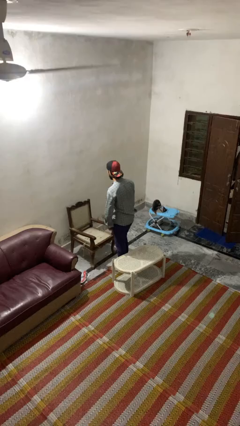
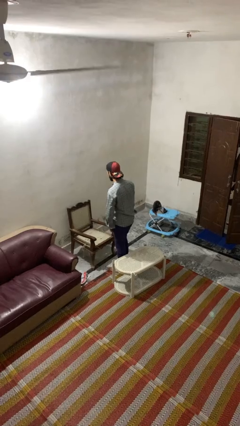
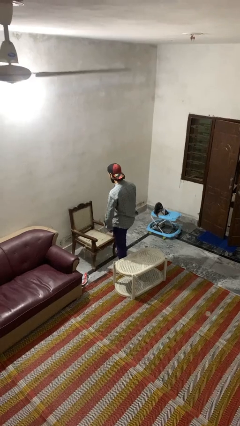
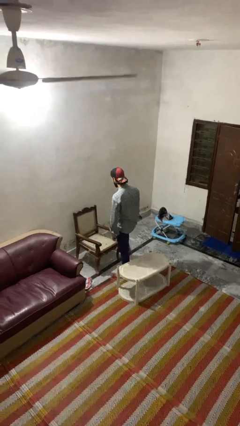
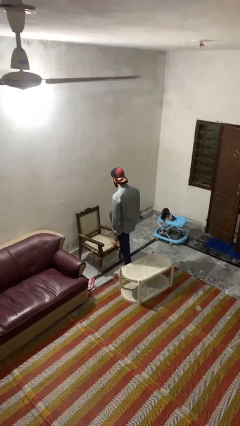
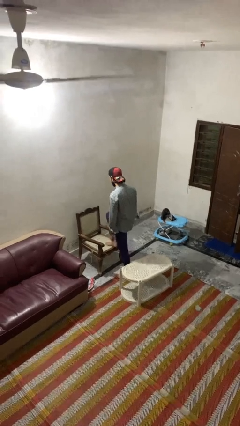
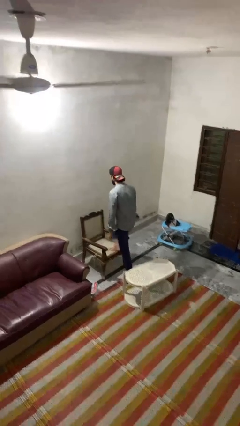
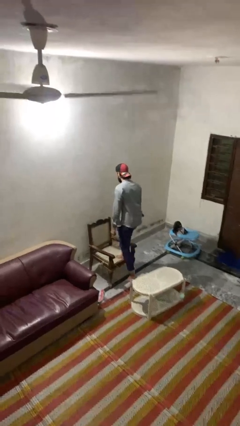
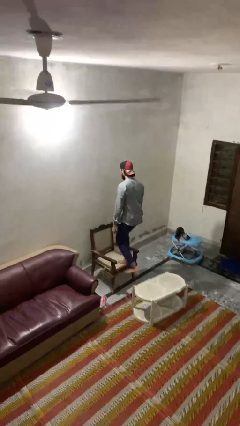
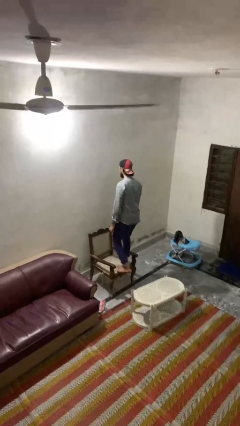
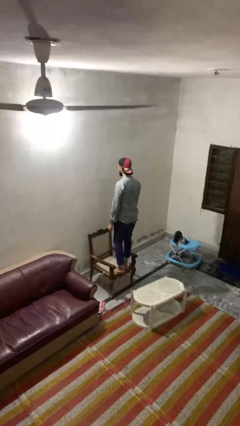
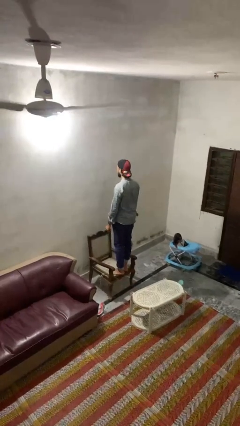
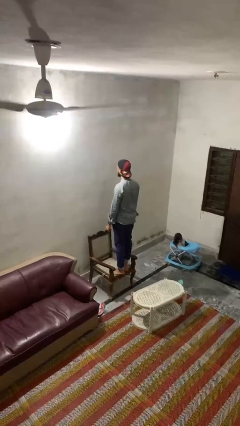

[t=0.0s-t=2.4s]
person climbs on chair

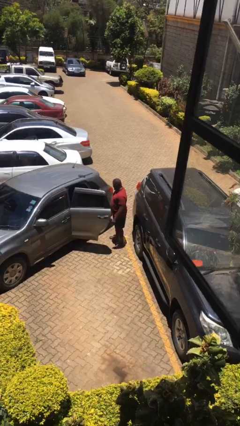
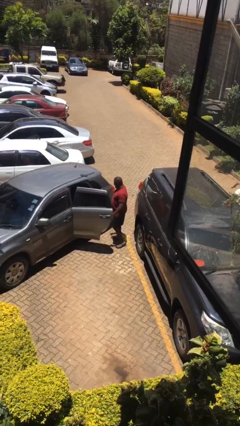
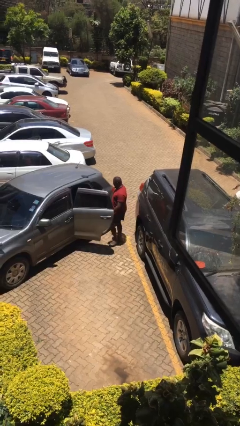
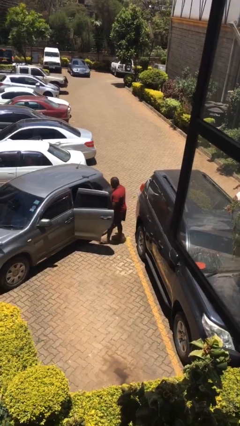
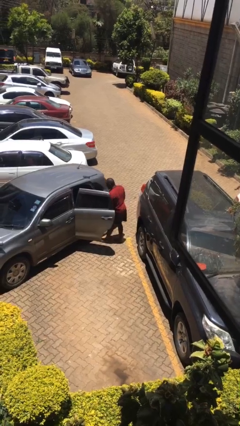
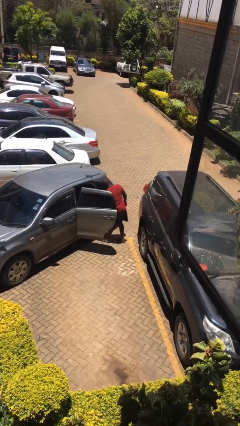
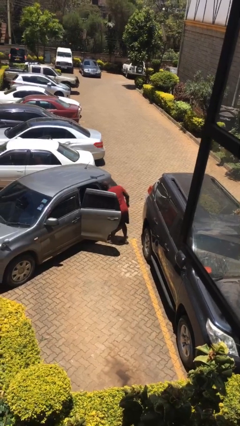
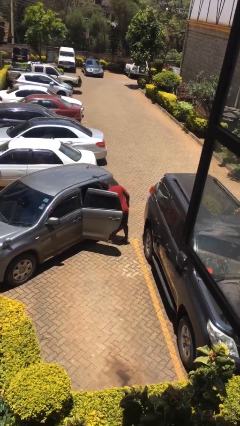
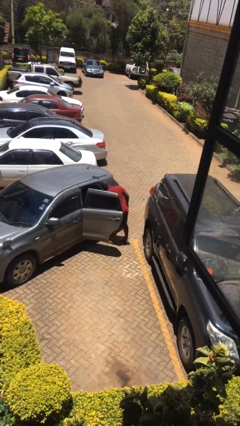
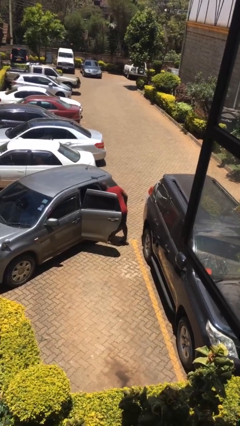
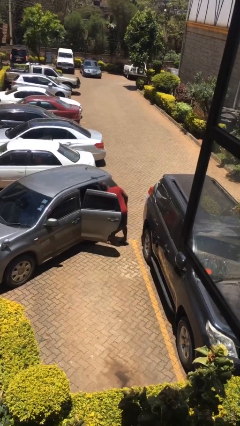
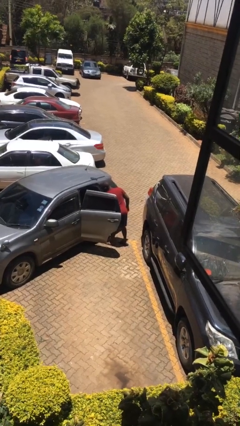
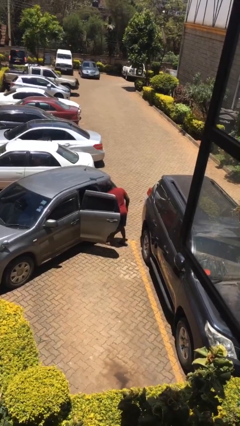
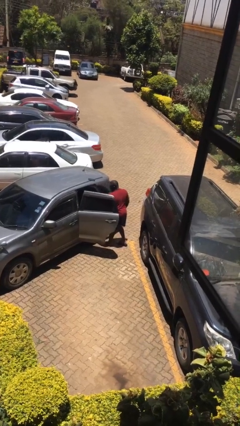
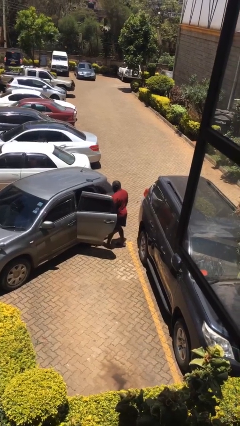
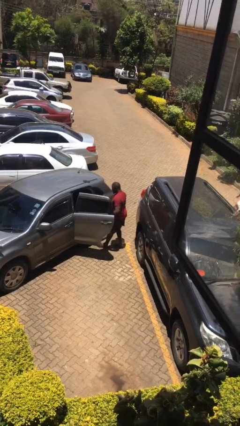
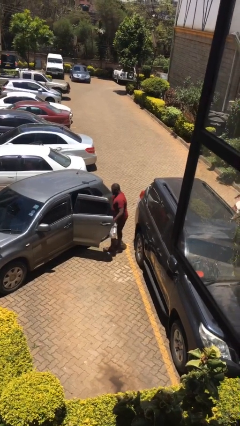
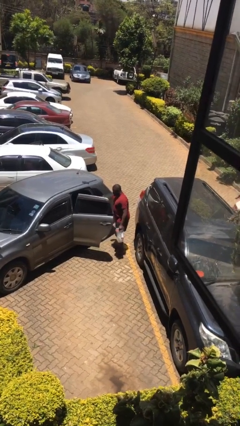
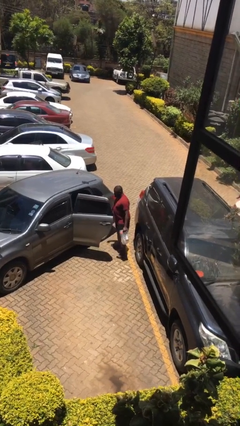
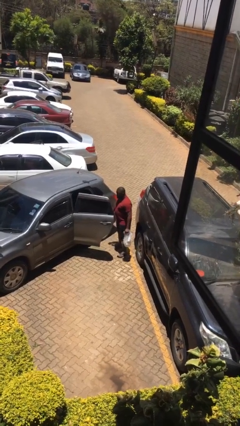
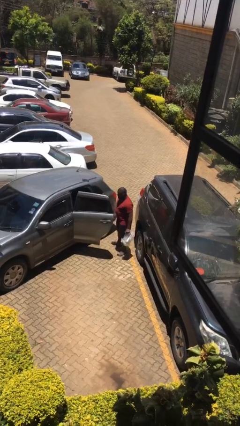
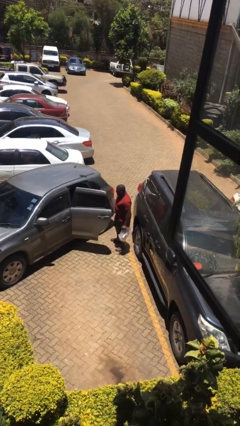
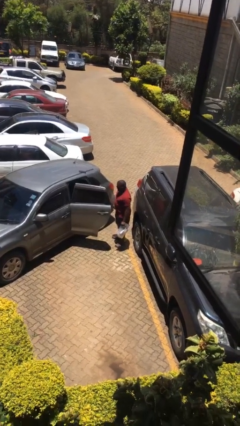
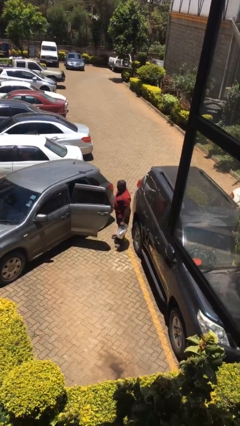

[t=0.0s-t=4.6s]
person unloads car

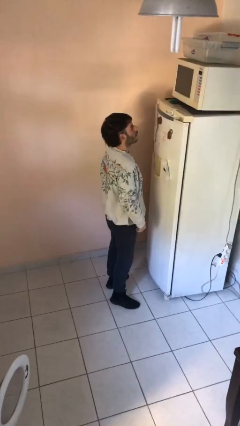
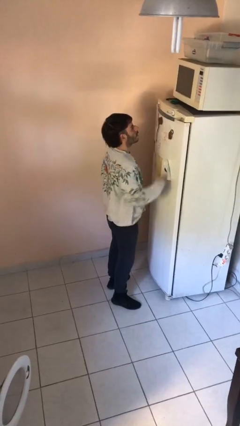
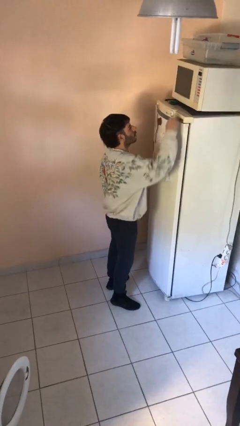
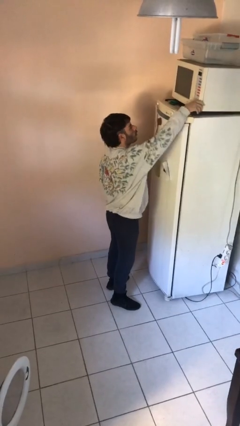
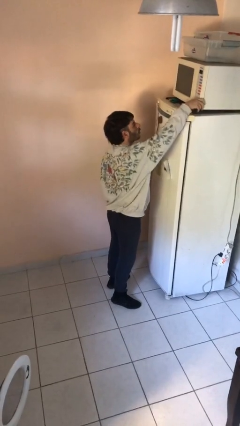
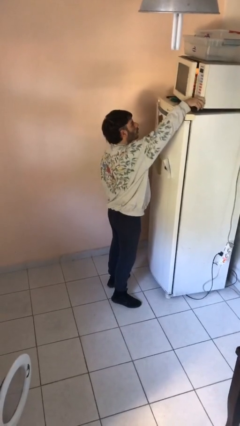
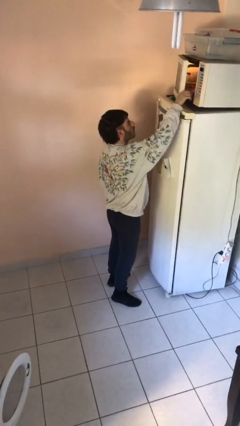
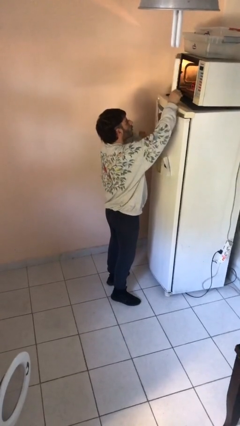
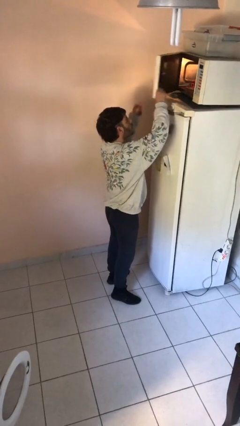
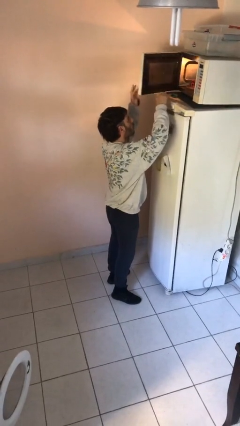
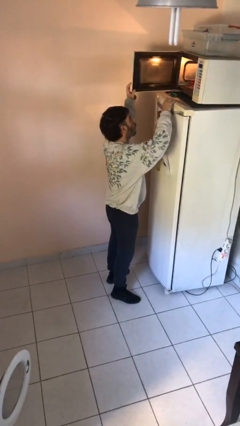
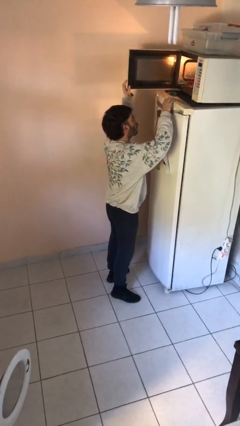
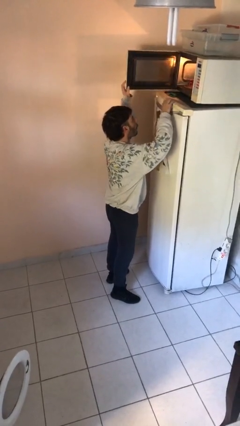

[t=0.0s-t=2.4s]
person opens microwave

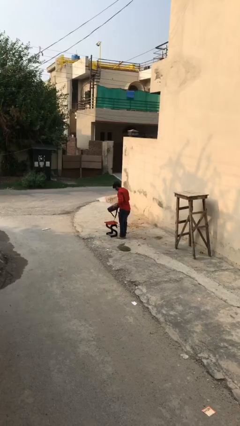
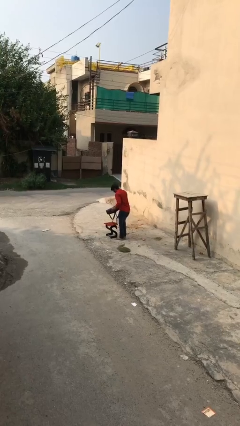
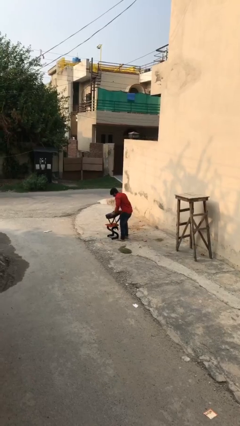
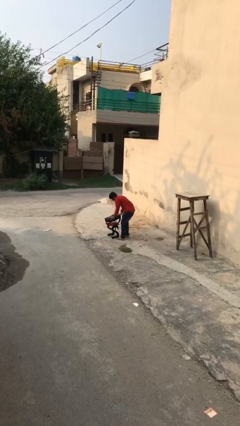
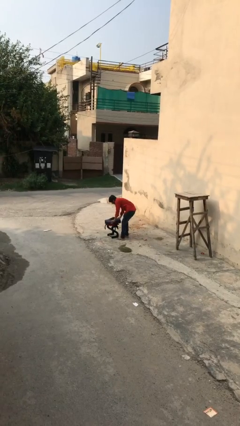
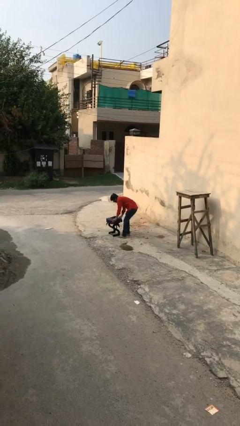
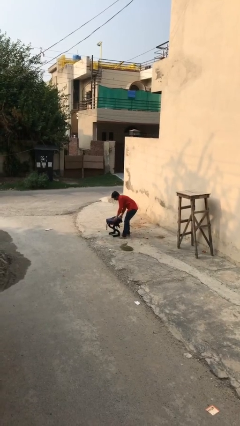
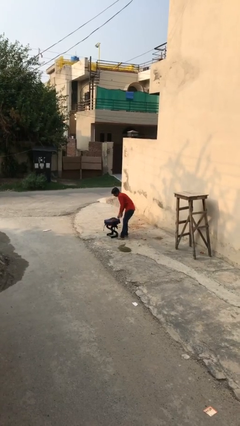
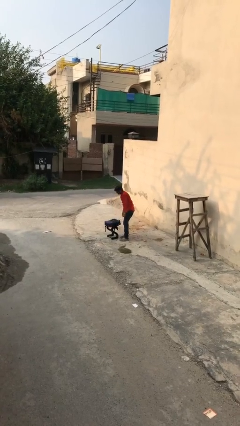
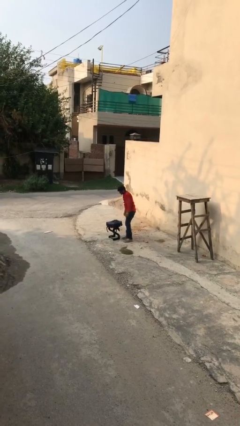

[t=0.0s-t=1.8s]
person puts down object on table

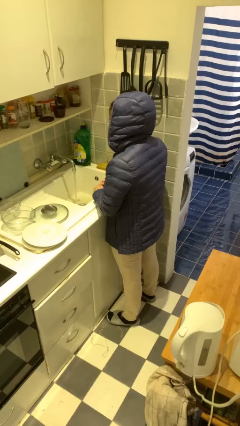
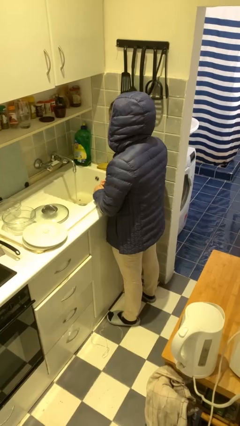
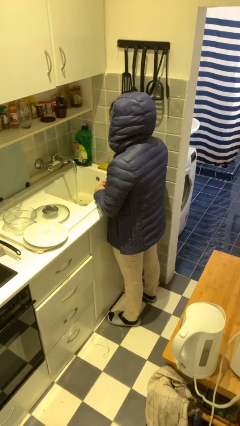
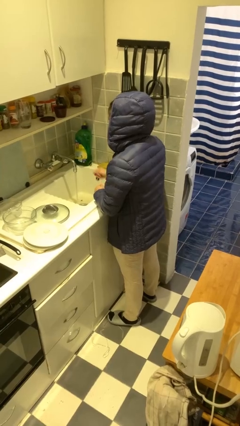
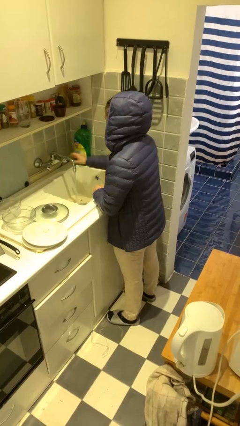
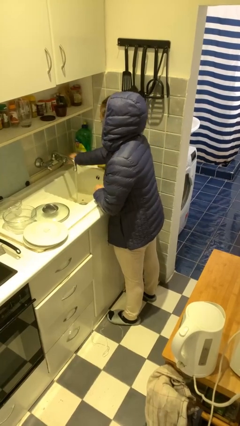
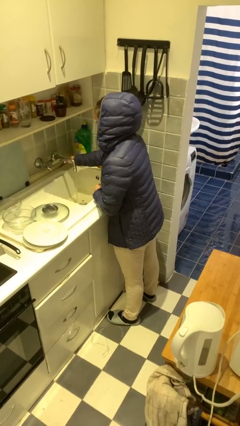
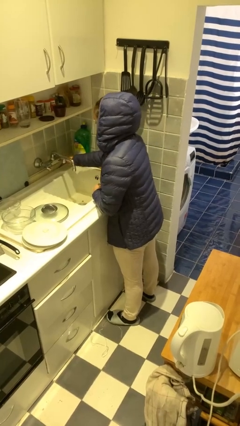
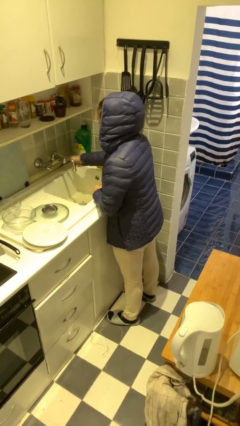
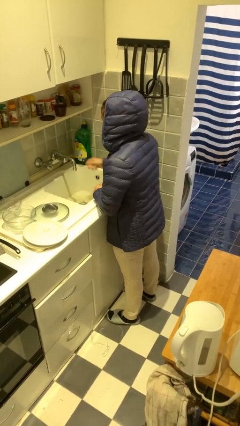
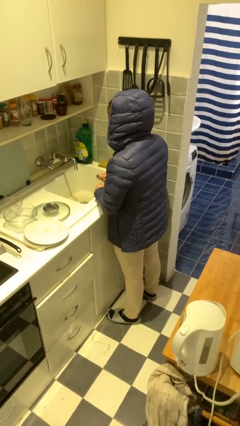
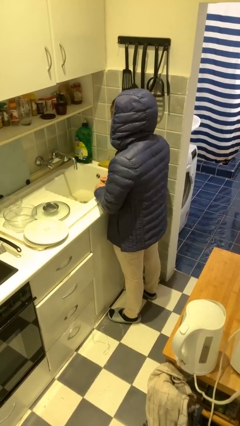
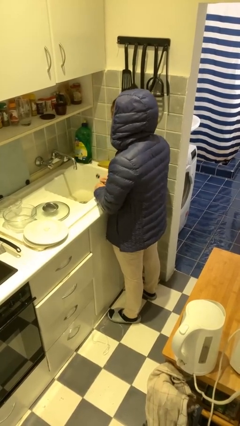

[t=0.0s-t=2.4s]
person turns off faucet

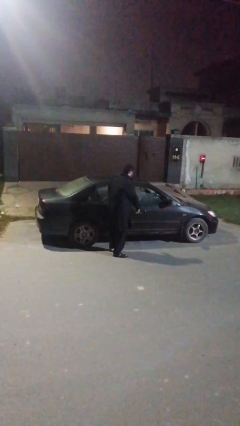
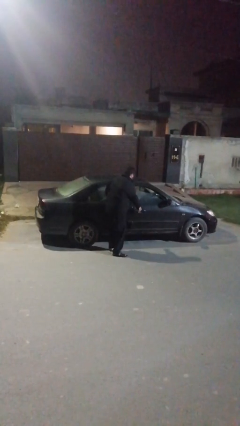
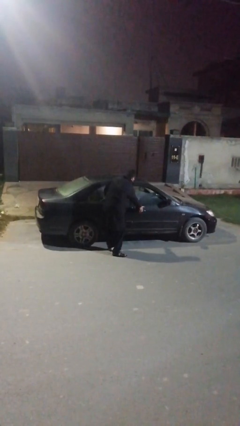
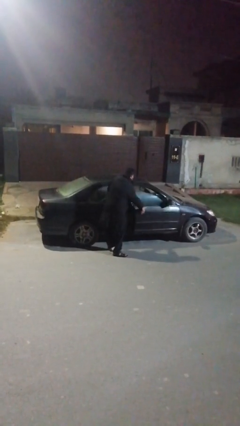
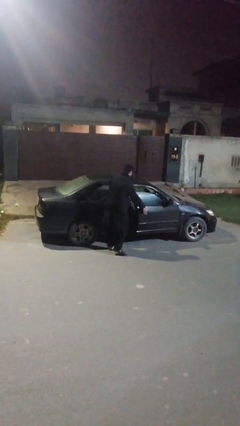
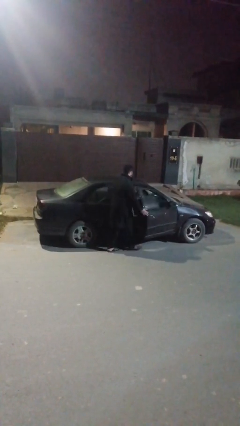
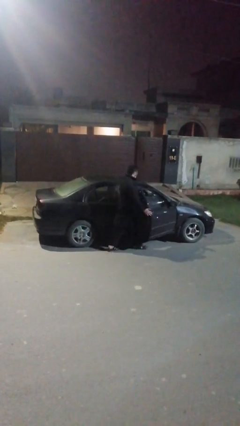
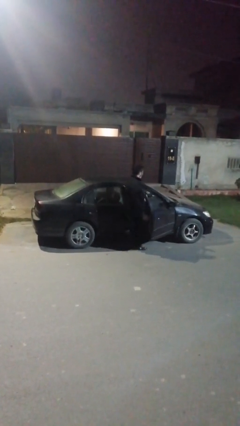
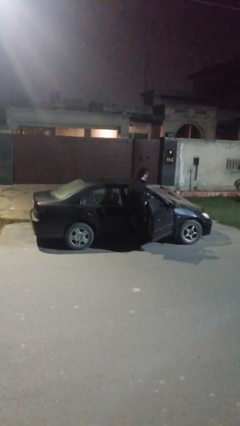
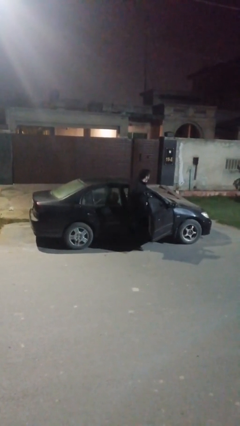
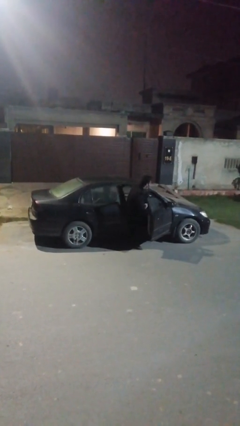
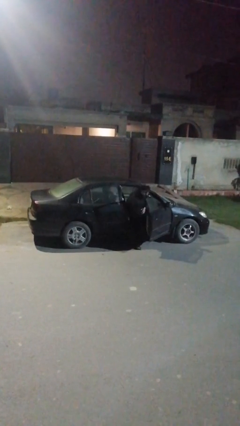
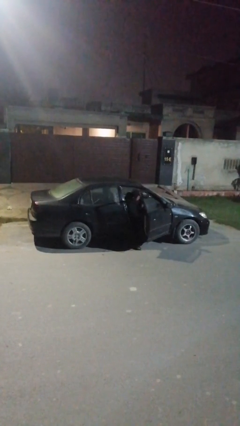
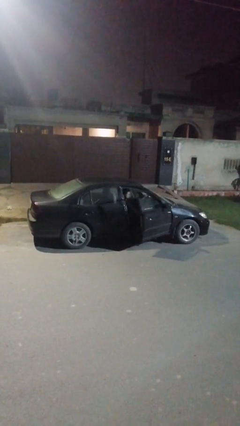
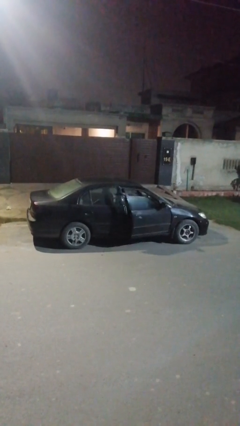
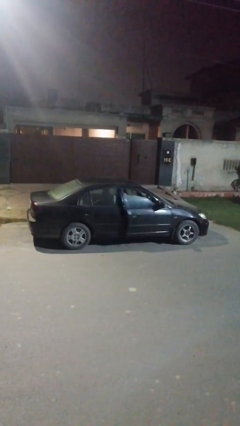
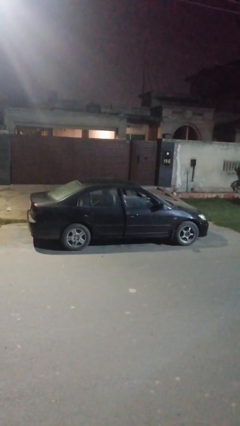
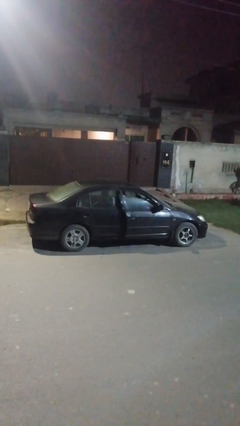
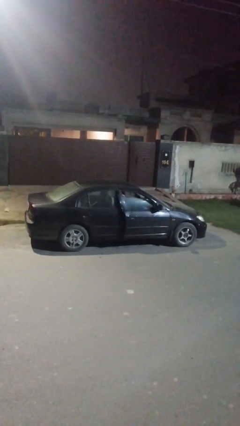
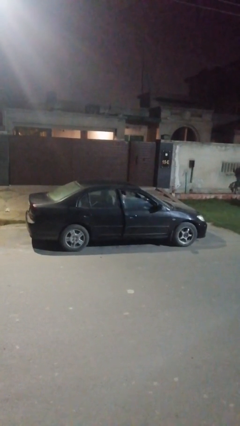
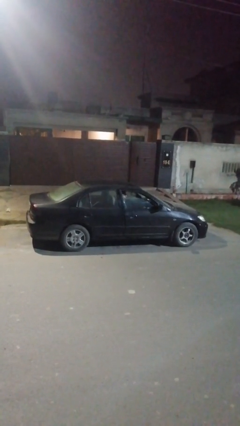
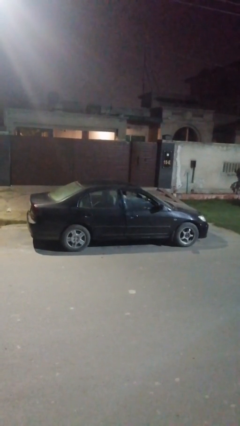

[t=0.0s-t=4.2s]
car picks up person
